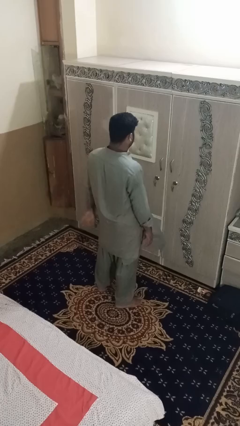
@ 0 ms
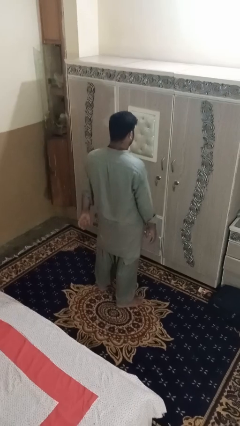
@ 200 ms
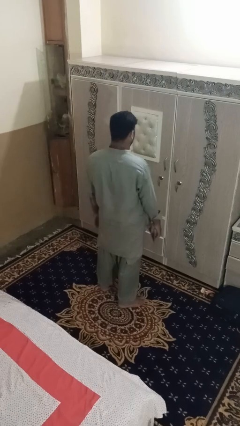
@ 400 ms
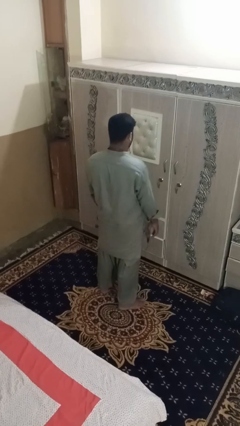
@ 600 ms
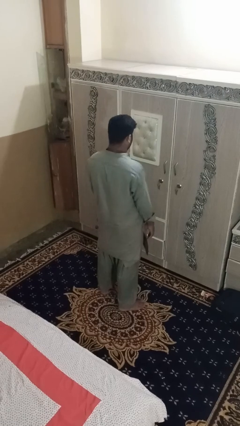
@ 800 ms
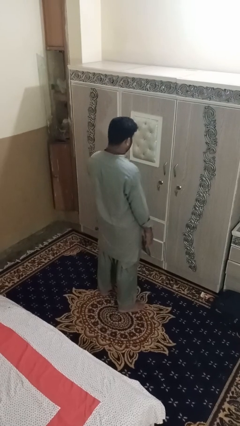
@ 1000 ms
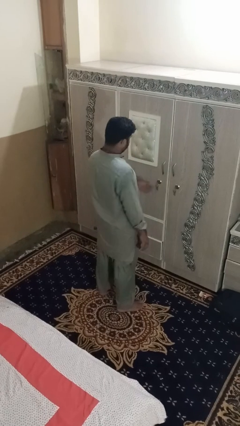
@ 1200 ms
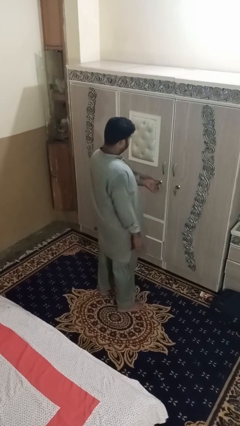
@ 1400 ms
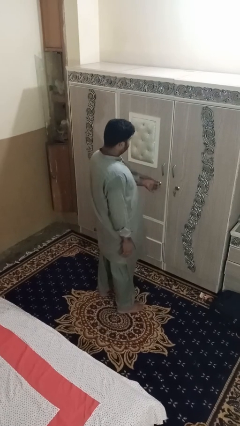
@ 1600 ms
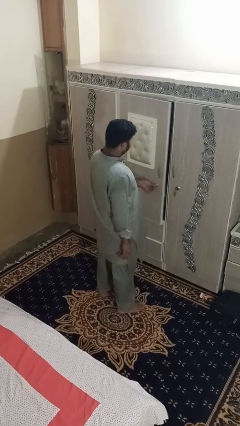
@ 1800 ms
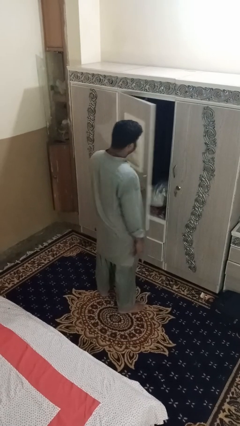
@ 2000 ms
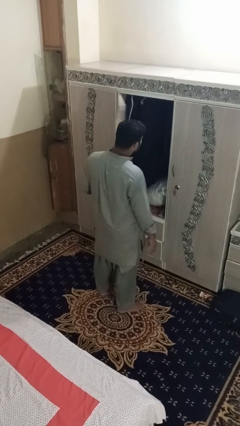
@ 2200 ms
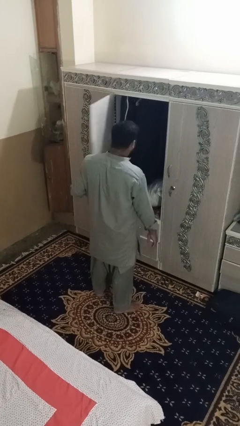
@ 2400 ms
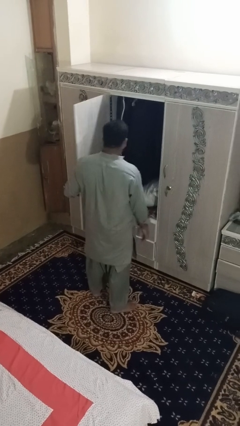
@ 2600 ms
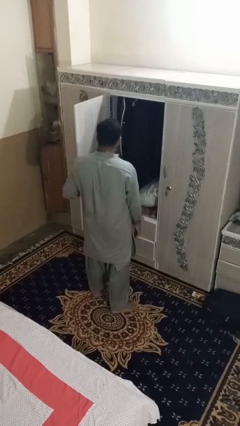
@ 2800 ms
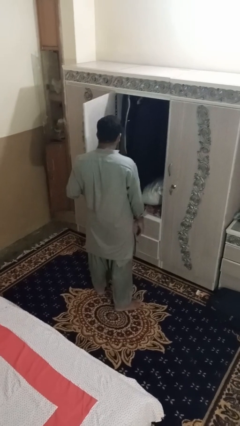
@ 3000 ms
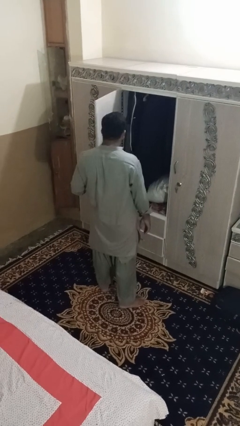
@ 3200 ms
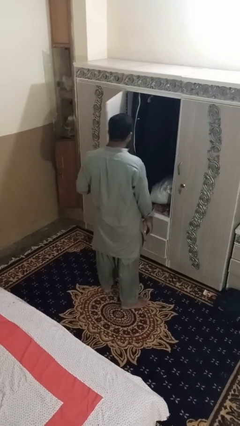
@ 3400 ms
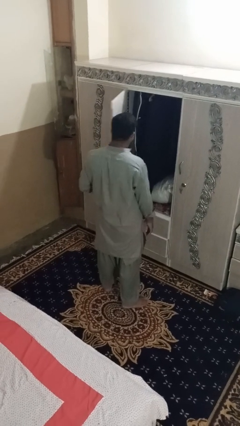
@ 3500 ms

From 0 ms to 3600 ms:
person opens dresser drawer

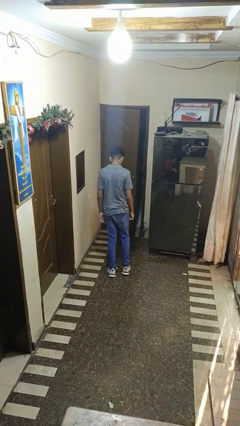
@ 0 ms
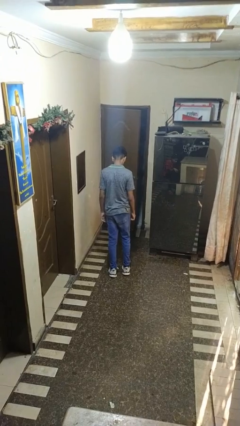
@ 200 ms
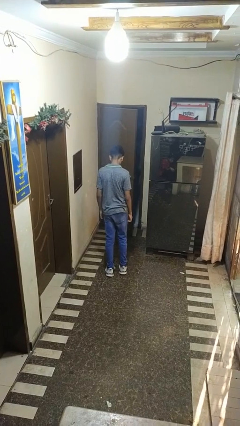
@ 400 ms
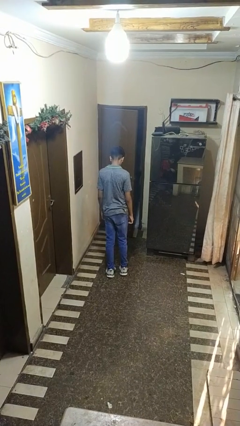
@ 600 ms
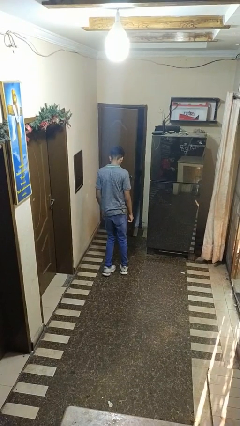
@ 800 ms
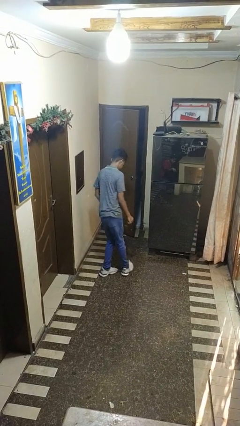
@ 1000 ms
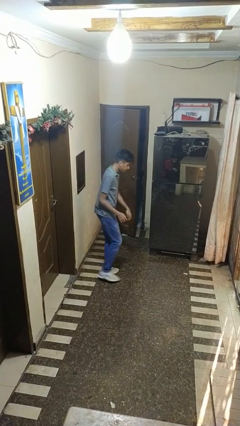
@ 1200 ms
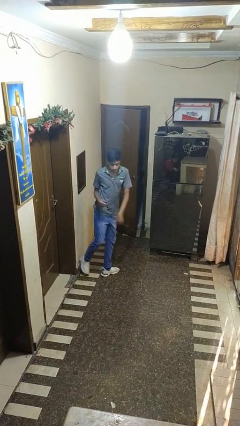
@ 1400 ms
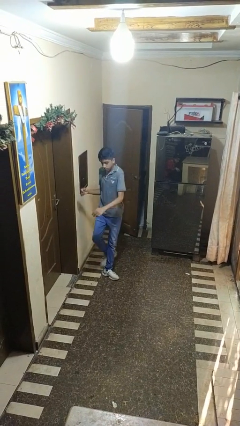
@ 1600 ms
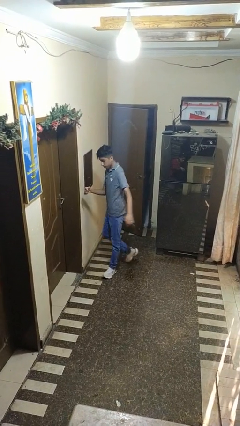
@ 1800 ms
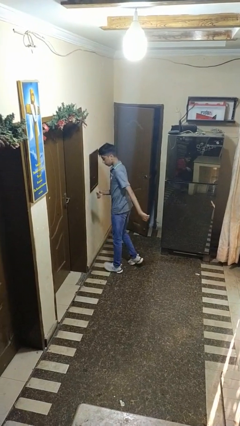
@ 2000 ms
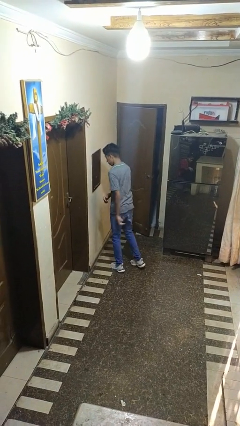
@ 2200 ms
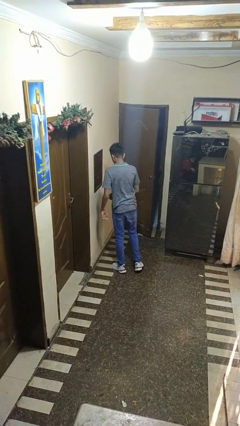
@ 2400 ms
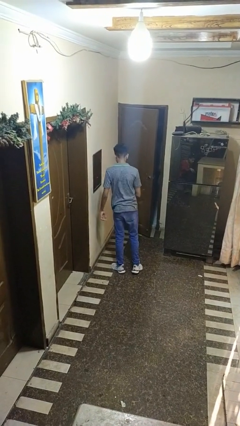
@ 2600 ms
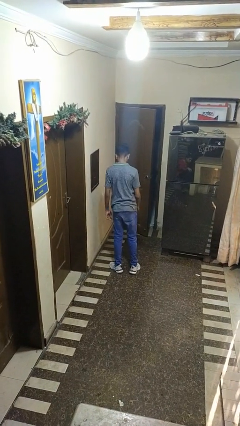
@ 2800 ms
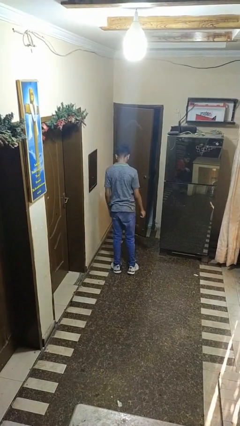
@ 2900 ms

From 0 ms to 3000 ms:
person twirls

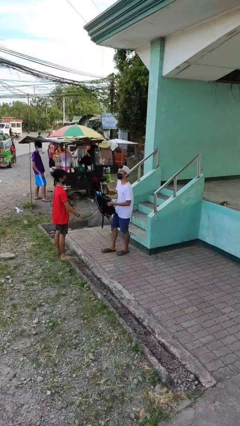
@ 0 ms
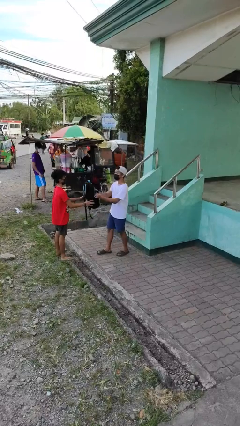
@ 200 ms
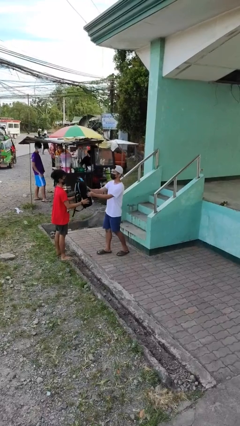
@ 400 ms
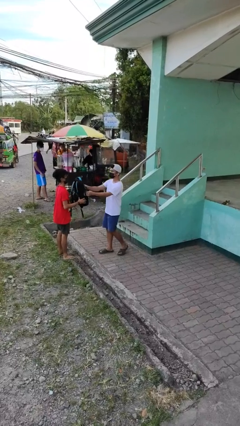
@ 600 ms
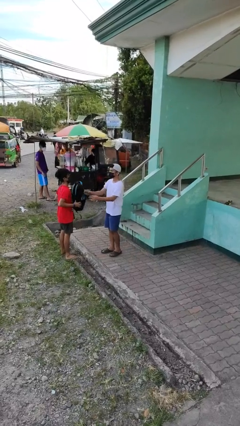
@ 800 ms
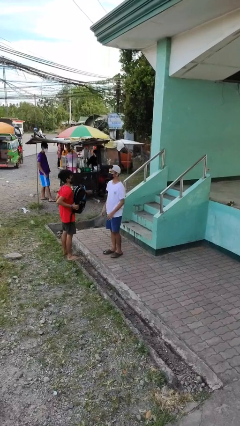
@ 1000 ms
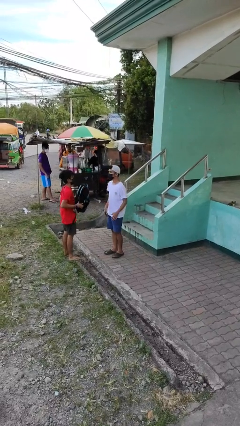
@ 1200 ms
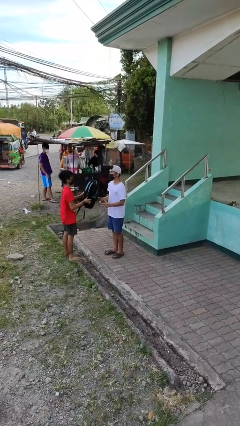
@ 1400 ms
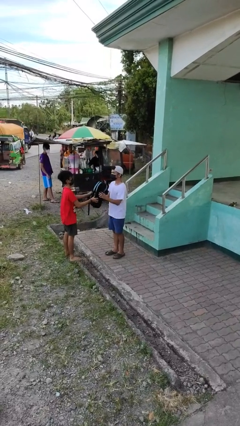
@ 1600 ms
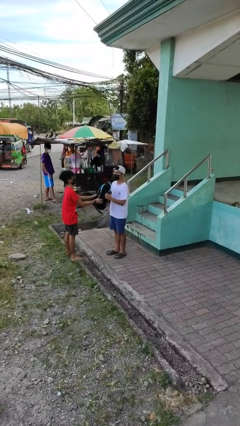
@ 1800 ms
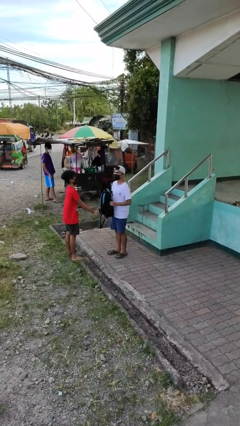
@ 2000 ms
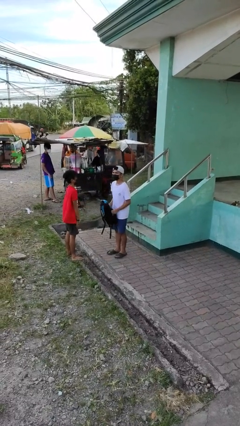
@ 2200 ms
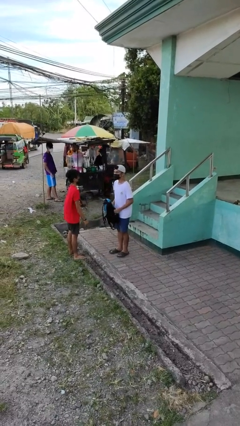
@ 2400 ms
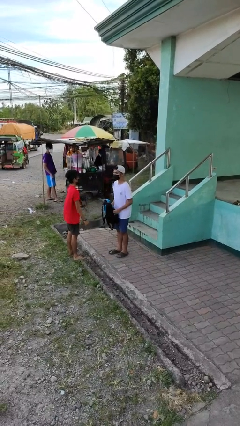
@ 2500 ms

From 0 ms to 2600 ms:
person transfers object to person

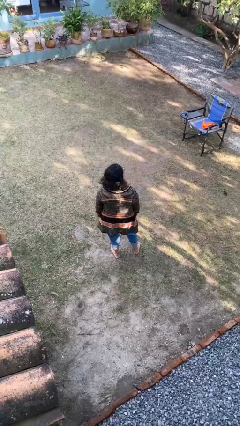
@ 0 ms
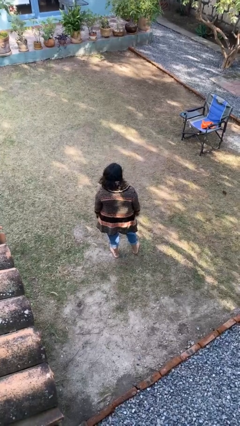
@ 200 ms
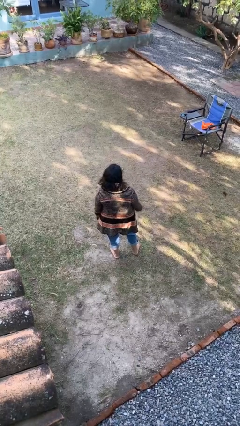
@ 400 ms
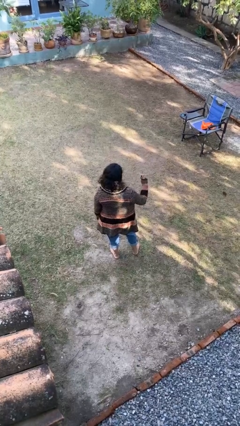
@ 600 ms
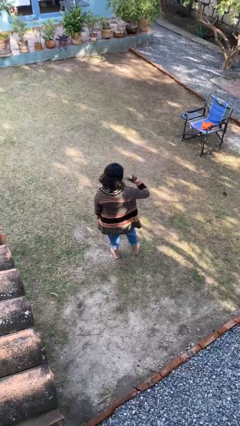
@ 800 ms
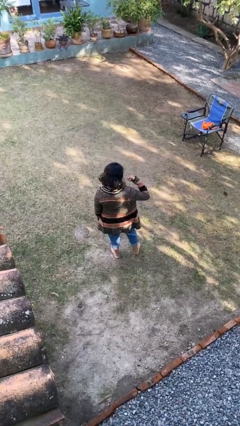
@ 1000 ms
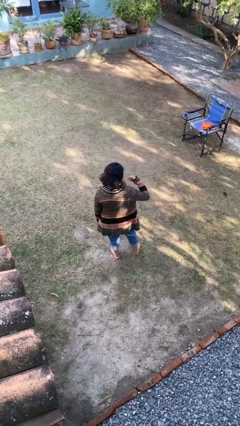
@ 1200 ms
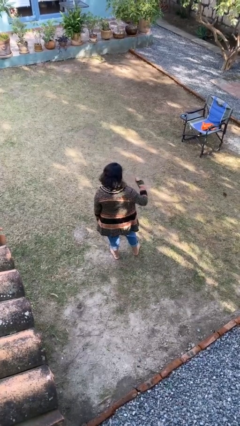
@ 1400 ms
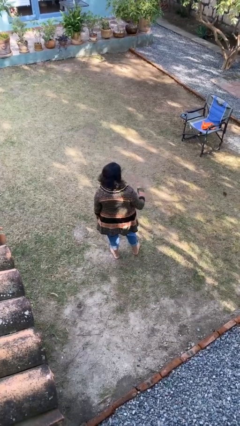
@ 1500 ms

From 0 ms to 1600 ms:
person gestures call me

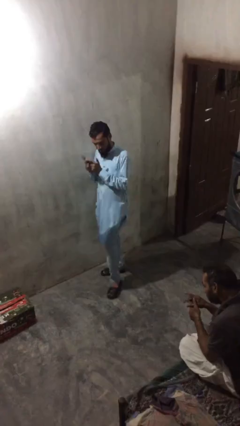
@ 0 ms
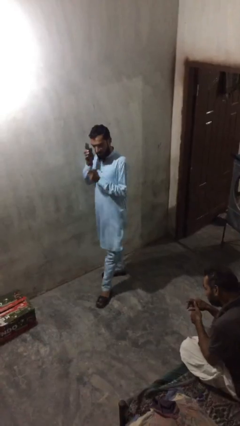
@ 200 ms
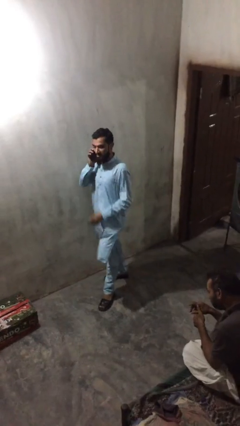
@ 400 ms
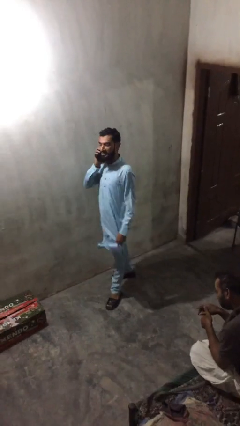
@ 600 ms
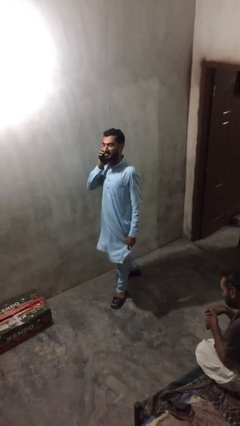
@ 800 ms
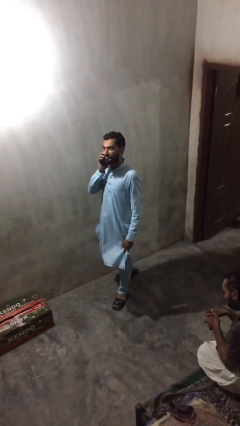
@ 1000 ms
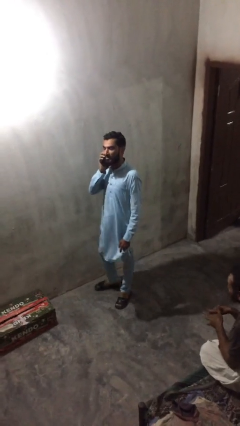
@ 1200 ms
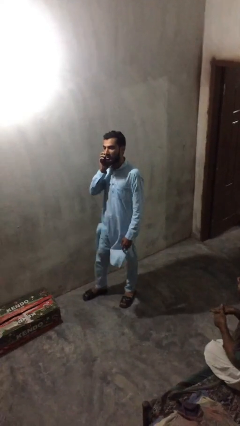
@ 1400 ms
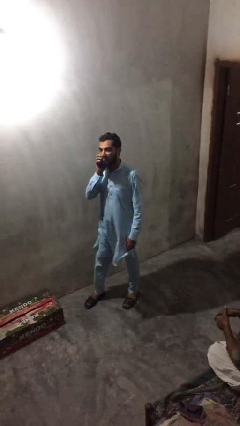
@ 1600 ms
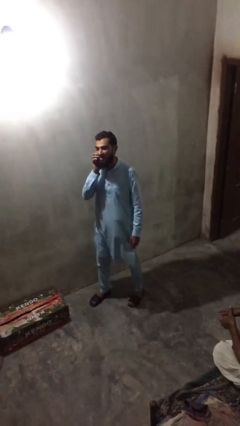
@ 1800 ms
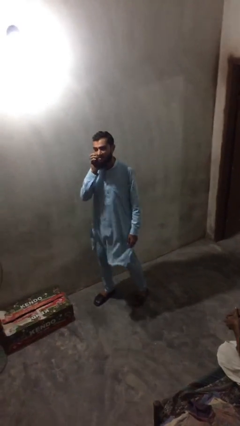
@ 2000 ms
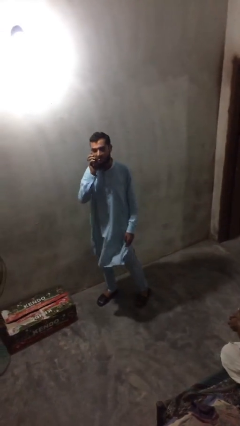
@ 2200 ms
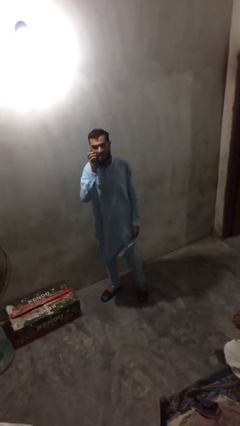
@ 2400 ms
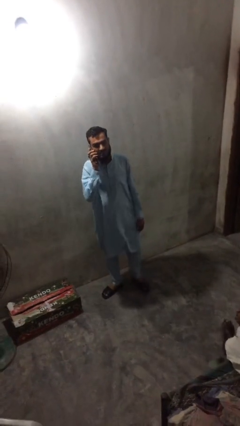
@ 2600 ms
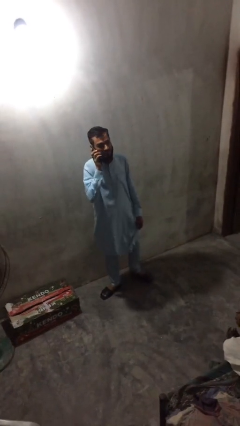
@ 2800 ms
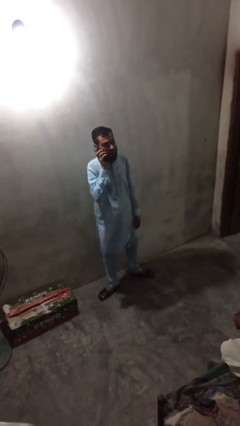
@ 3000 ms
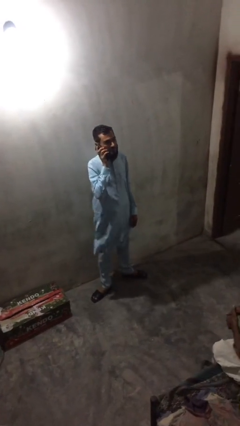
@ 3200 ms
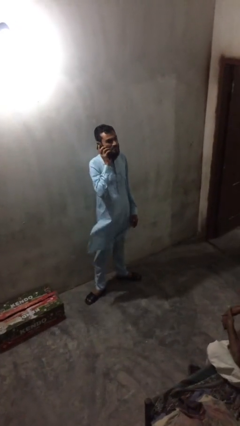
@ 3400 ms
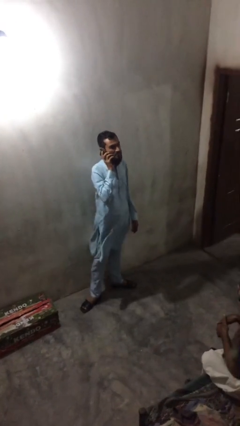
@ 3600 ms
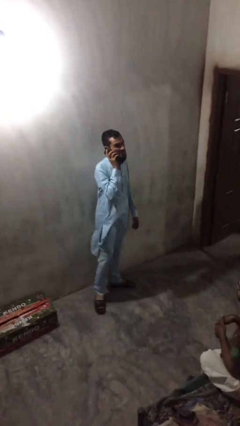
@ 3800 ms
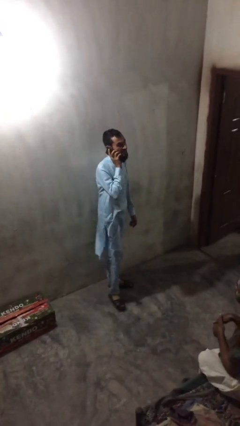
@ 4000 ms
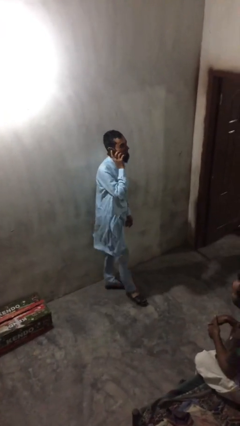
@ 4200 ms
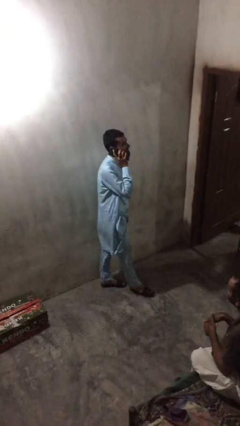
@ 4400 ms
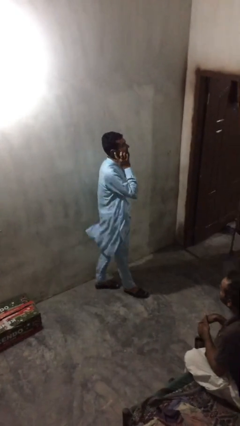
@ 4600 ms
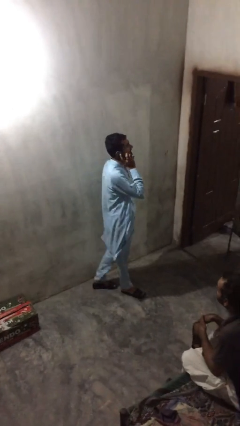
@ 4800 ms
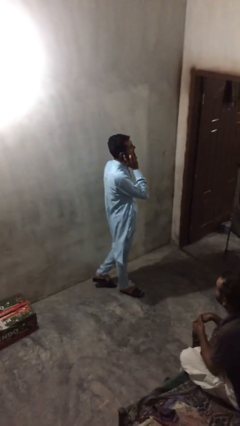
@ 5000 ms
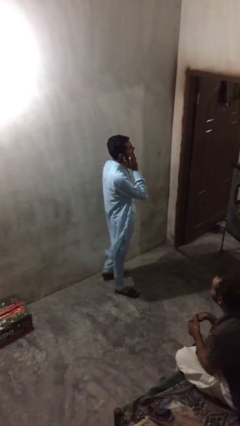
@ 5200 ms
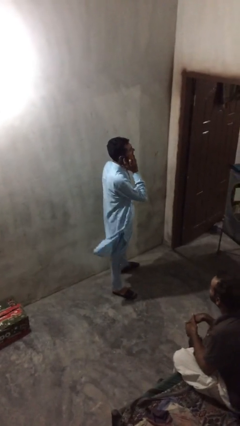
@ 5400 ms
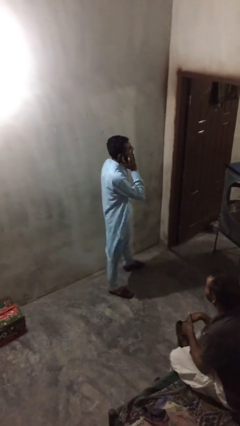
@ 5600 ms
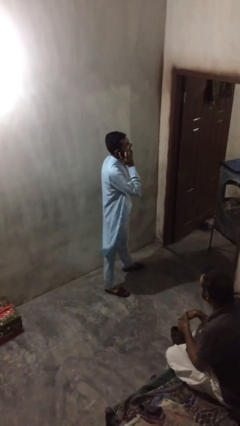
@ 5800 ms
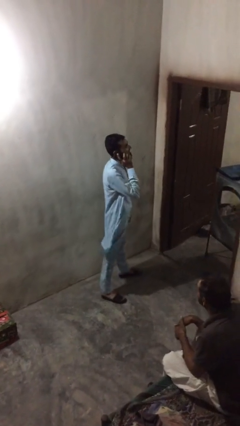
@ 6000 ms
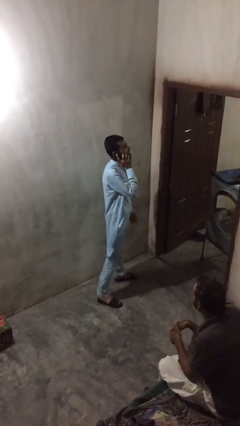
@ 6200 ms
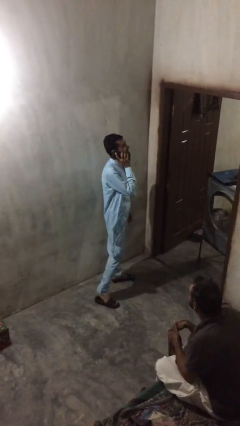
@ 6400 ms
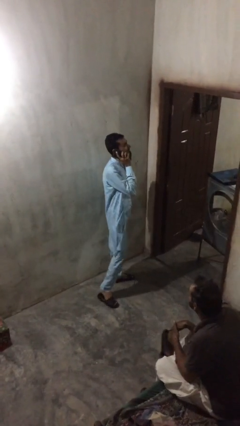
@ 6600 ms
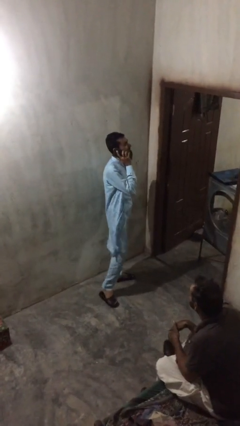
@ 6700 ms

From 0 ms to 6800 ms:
person talks on phone
